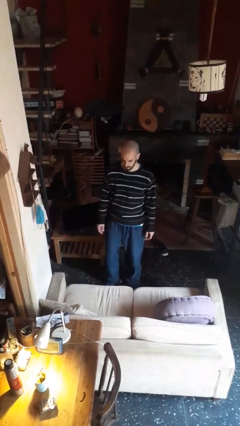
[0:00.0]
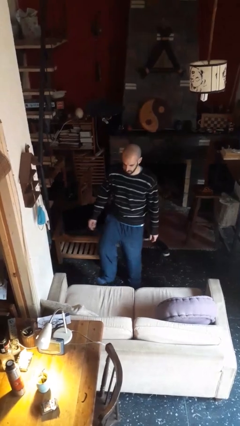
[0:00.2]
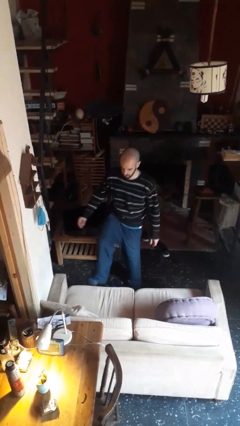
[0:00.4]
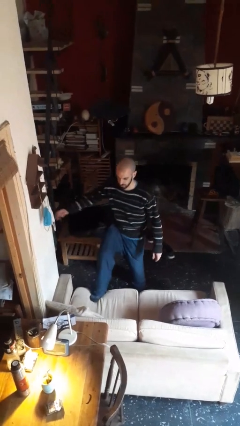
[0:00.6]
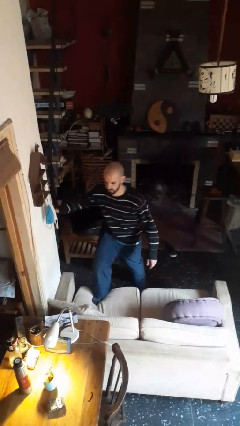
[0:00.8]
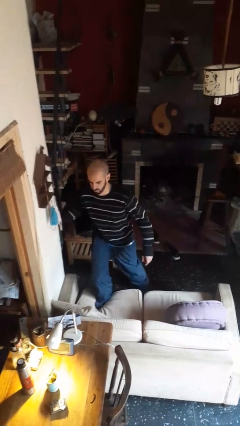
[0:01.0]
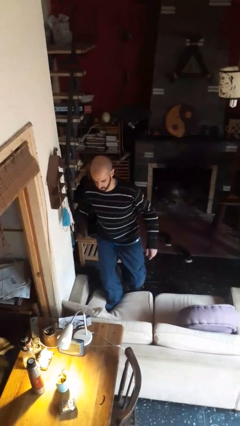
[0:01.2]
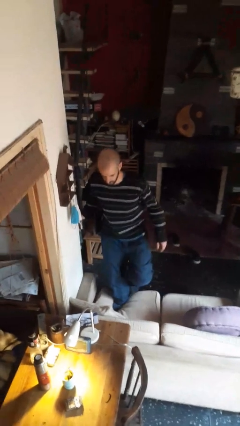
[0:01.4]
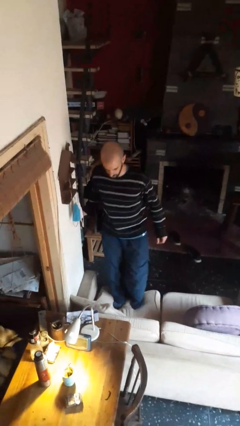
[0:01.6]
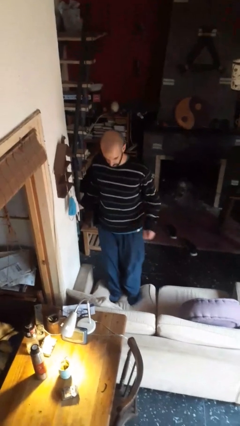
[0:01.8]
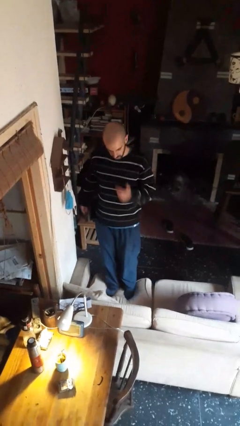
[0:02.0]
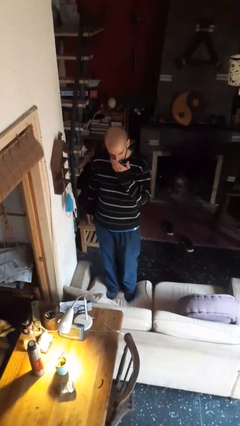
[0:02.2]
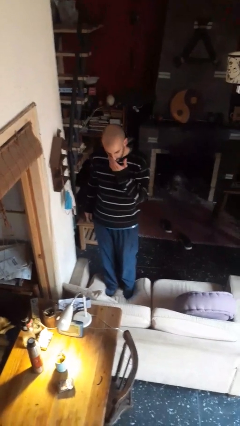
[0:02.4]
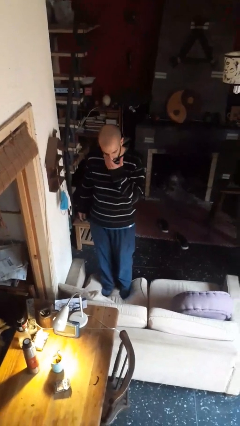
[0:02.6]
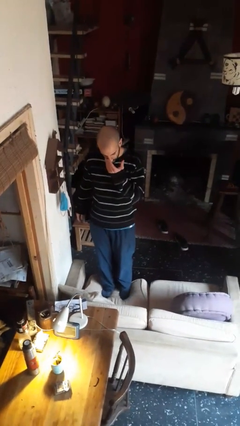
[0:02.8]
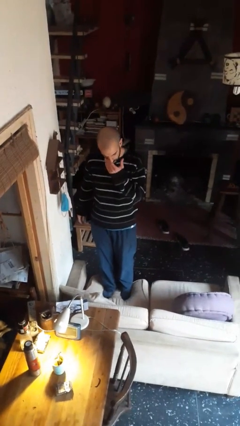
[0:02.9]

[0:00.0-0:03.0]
person climbs on couch

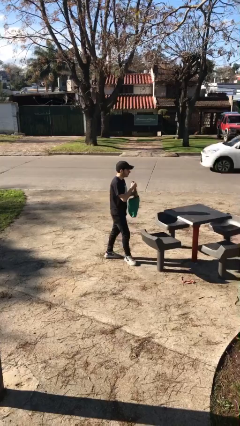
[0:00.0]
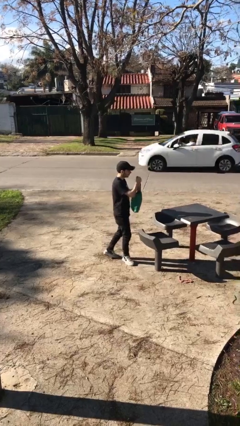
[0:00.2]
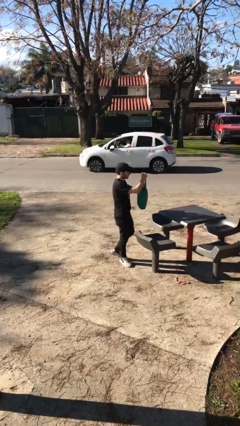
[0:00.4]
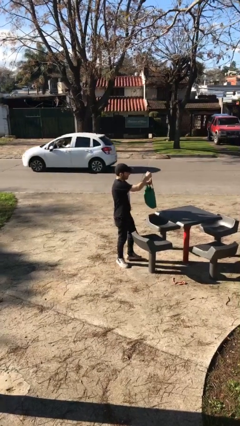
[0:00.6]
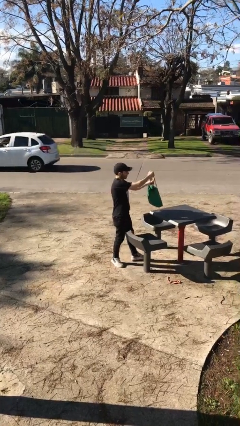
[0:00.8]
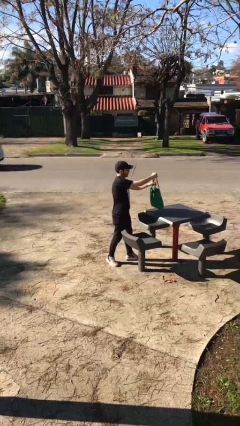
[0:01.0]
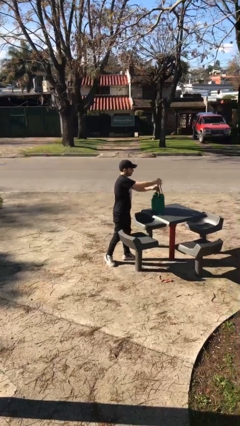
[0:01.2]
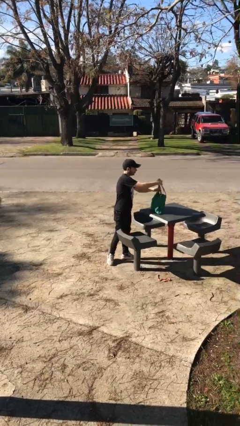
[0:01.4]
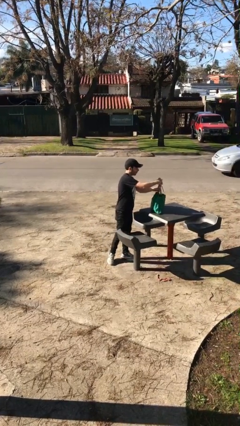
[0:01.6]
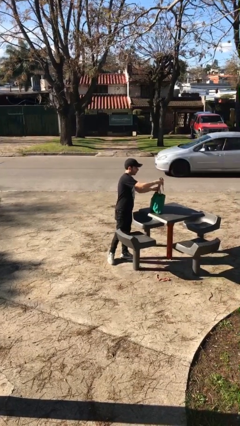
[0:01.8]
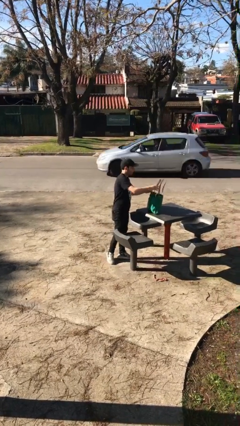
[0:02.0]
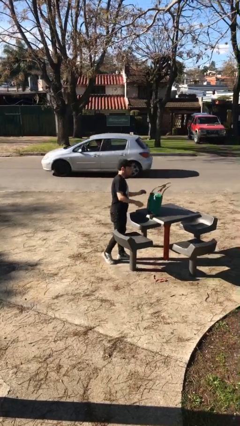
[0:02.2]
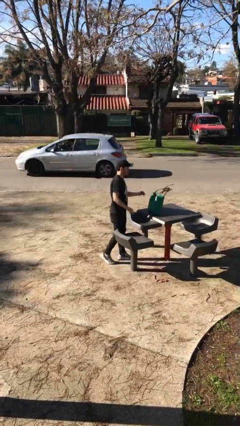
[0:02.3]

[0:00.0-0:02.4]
person puts down object on table

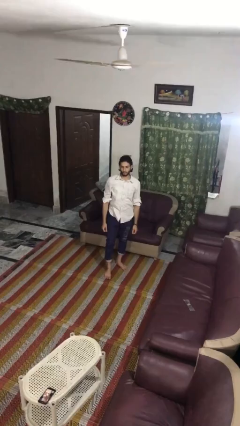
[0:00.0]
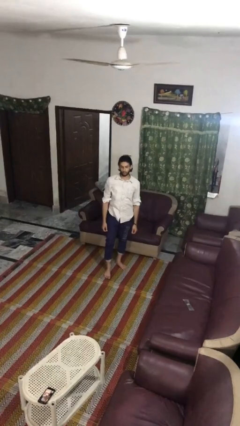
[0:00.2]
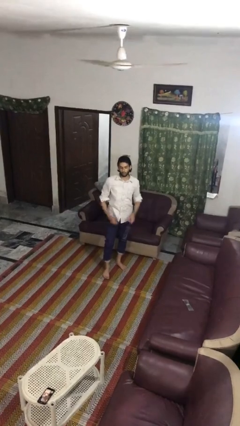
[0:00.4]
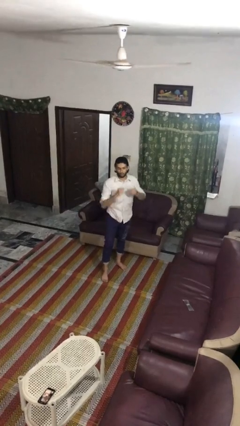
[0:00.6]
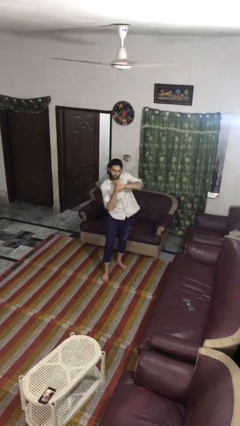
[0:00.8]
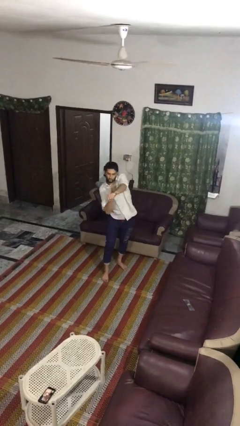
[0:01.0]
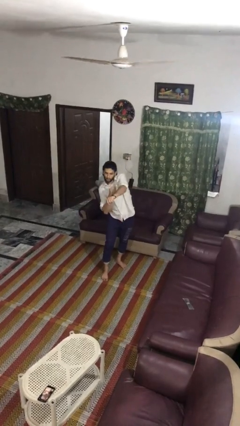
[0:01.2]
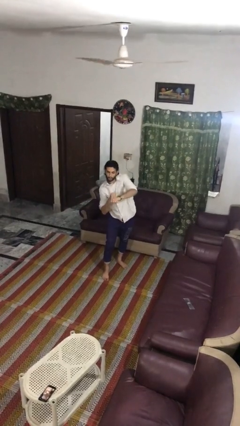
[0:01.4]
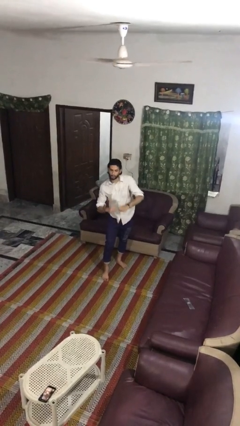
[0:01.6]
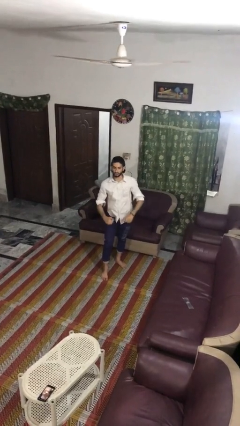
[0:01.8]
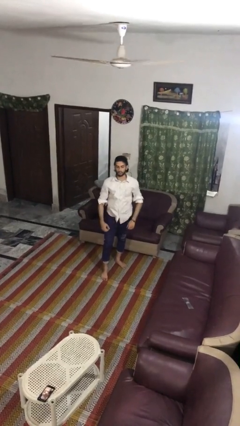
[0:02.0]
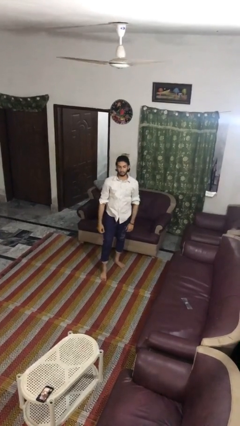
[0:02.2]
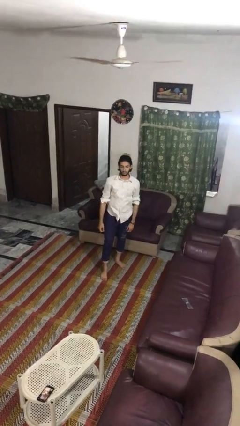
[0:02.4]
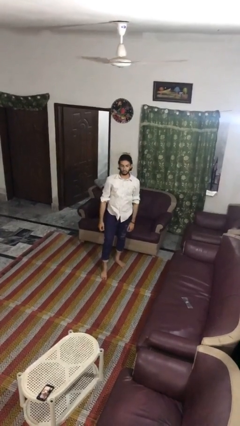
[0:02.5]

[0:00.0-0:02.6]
person punches

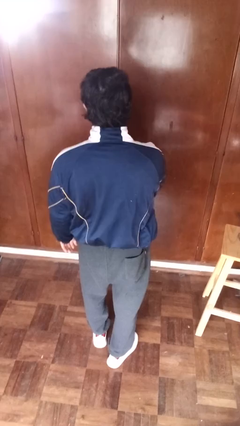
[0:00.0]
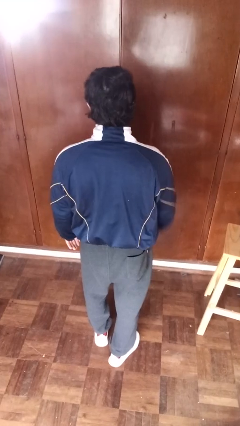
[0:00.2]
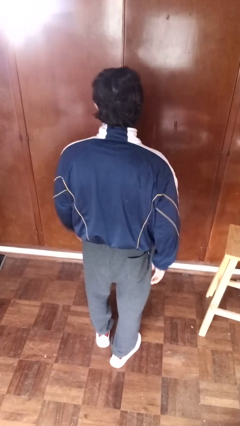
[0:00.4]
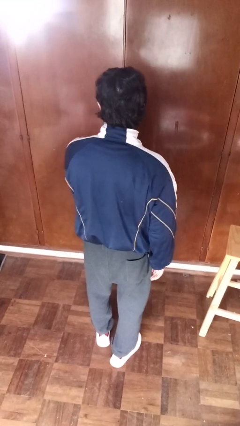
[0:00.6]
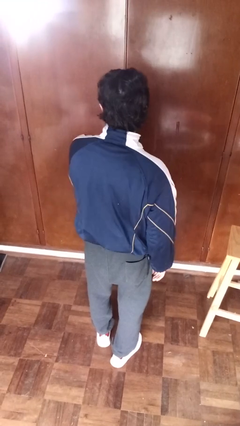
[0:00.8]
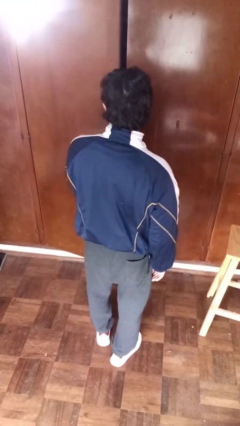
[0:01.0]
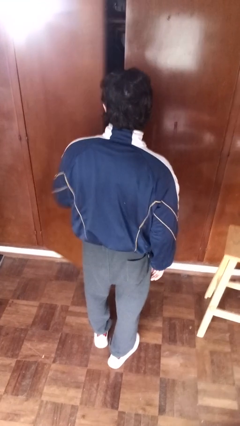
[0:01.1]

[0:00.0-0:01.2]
person opens closet door

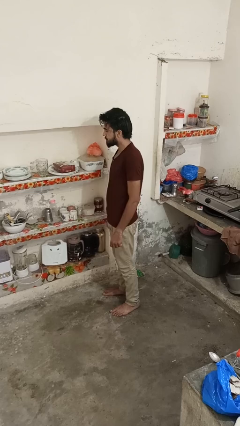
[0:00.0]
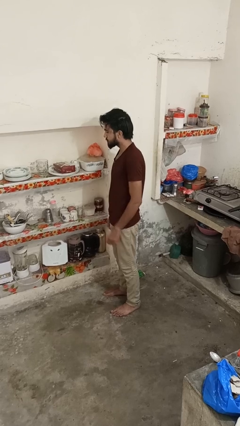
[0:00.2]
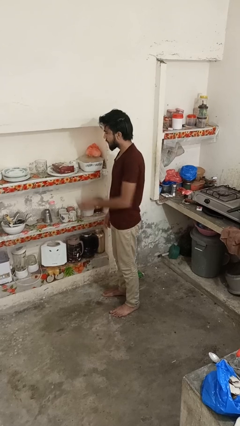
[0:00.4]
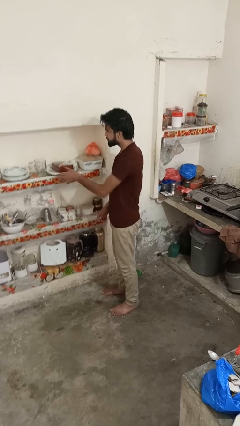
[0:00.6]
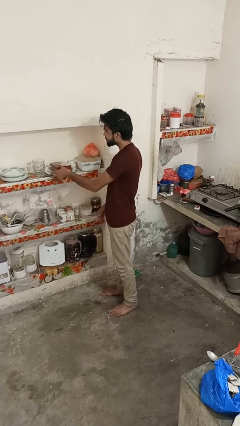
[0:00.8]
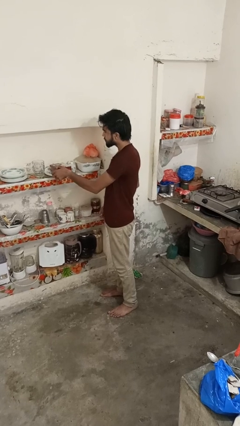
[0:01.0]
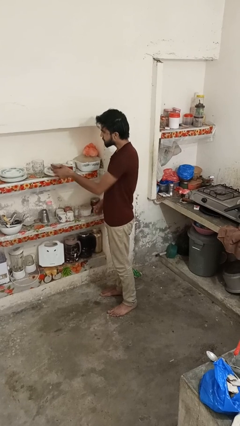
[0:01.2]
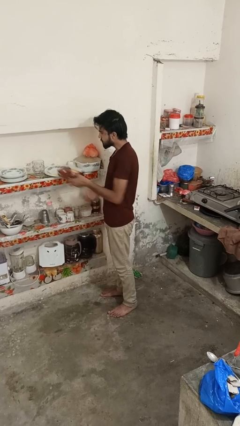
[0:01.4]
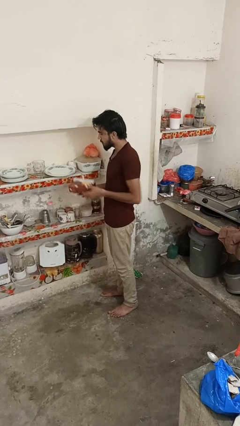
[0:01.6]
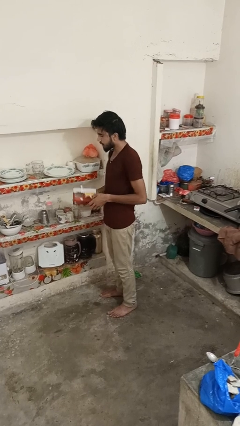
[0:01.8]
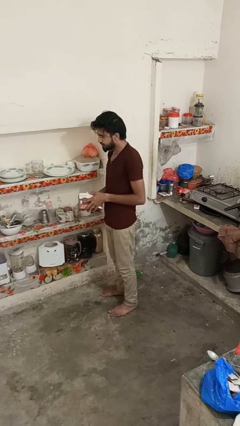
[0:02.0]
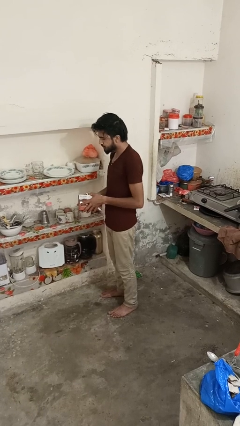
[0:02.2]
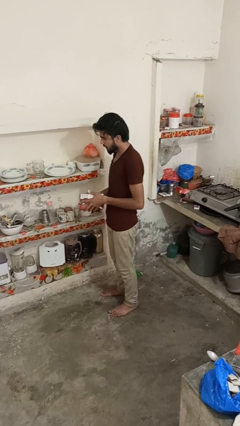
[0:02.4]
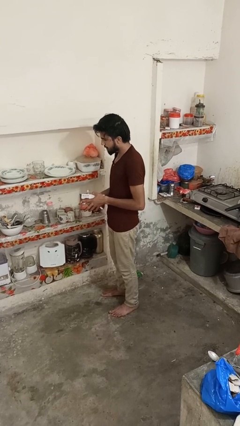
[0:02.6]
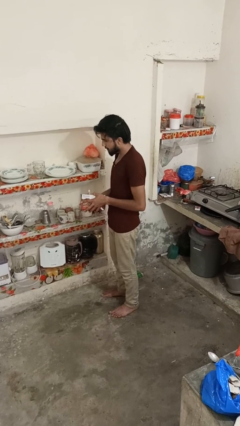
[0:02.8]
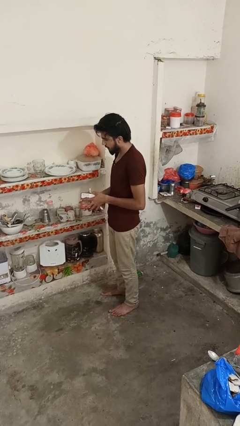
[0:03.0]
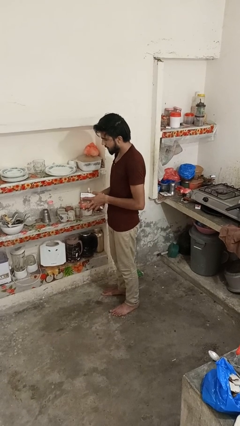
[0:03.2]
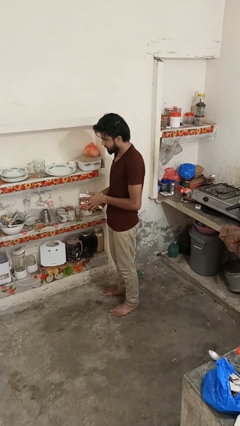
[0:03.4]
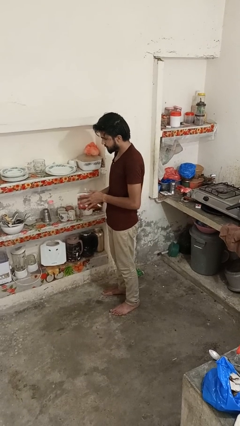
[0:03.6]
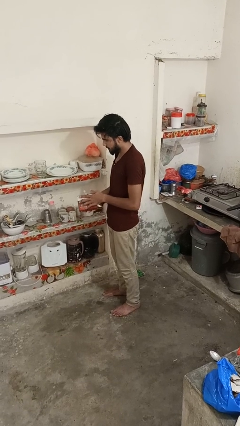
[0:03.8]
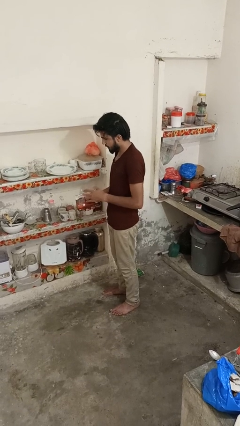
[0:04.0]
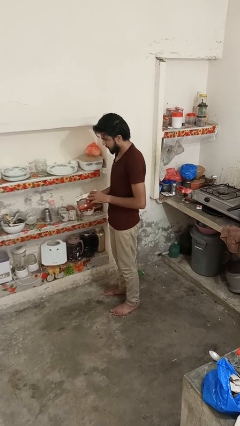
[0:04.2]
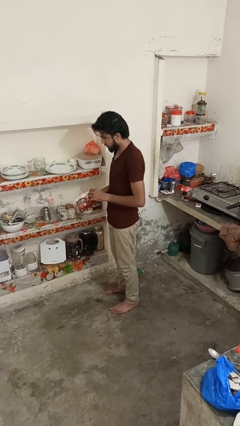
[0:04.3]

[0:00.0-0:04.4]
person picks up object from cabinet

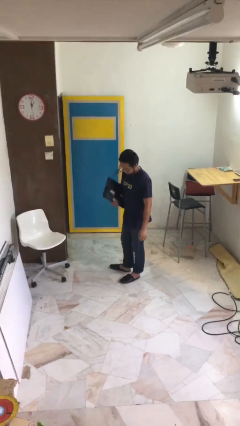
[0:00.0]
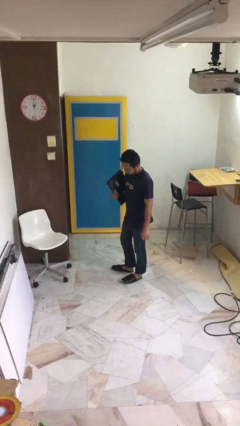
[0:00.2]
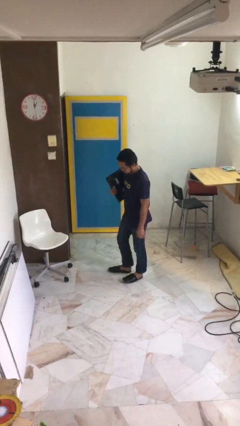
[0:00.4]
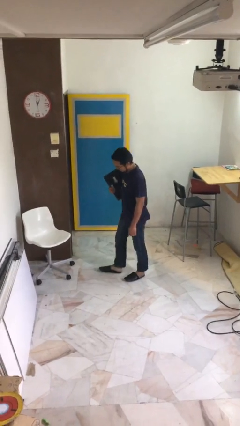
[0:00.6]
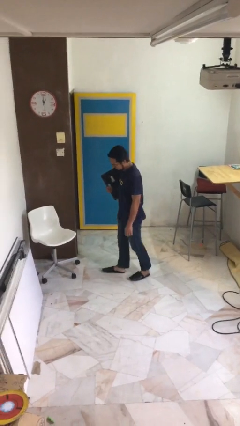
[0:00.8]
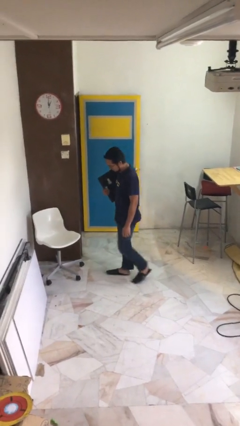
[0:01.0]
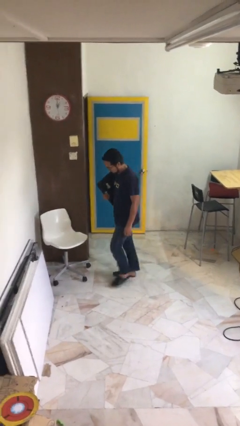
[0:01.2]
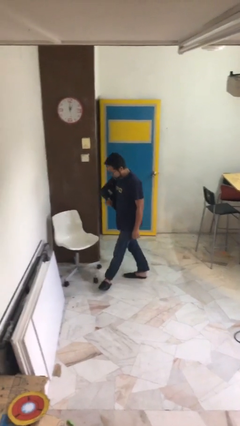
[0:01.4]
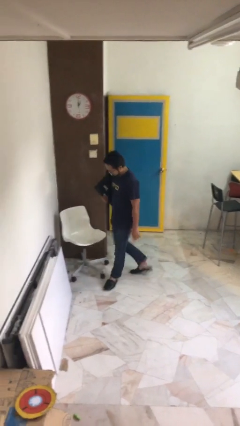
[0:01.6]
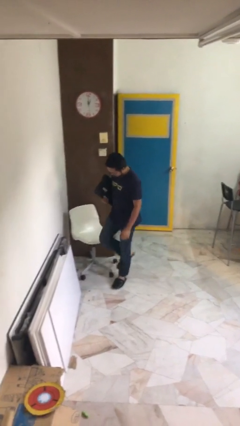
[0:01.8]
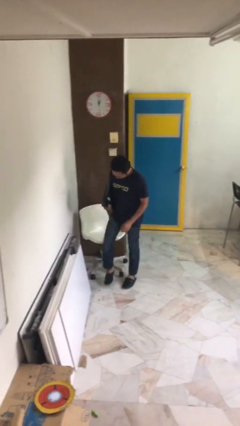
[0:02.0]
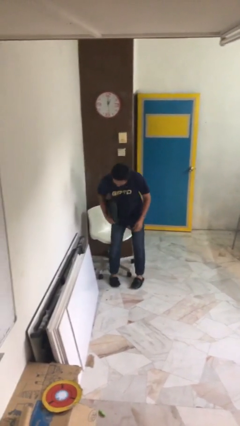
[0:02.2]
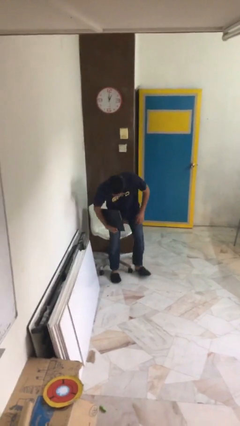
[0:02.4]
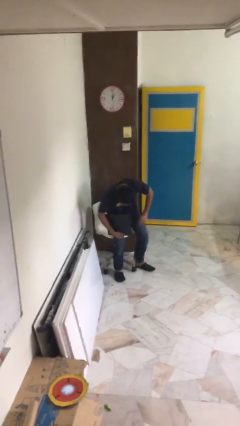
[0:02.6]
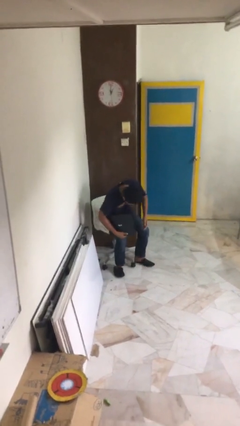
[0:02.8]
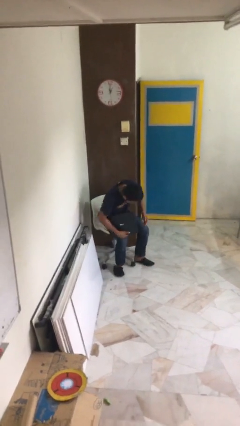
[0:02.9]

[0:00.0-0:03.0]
person sits down

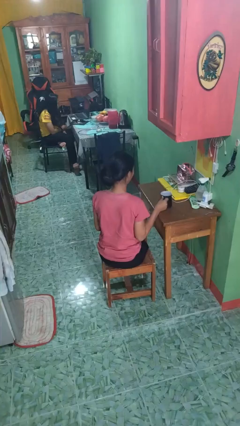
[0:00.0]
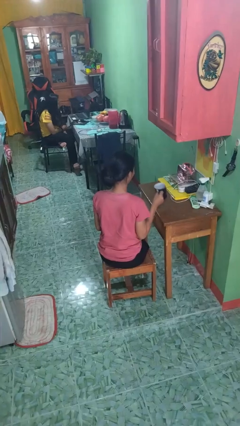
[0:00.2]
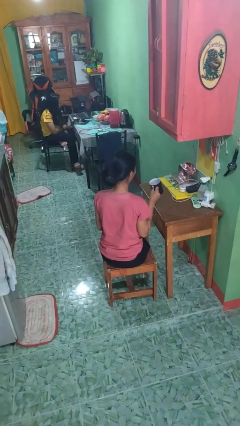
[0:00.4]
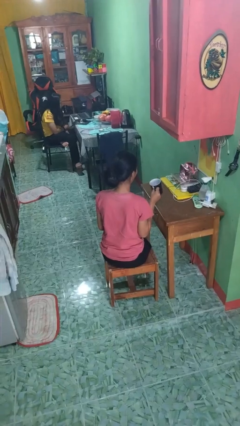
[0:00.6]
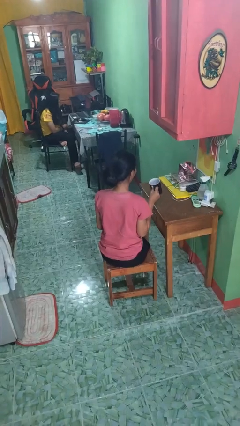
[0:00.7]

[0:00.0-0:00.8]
person picks up object from table
